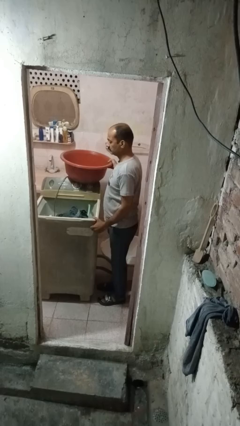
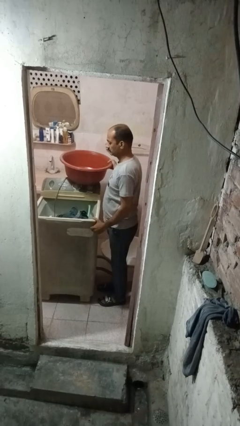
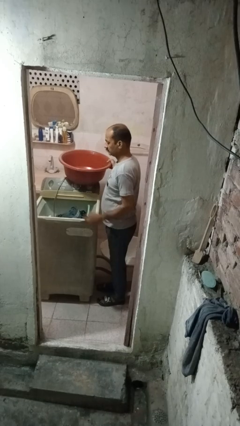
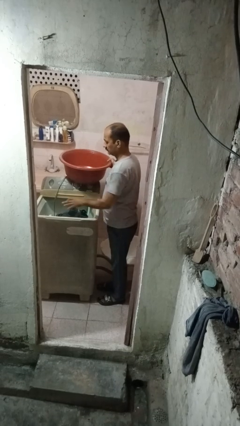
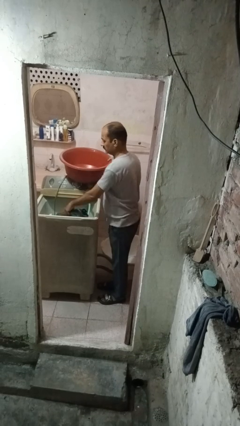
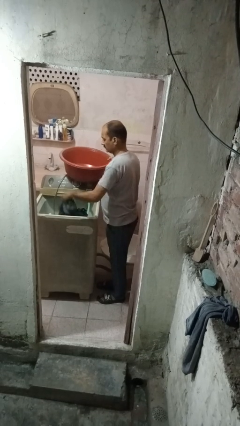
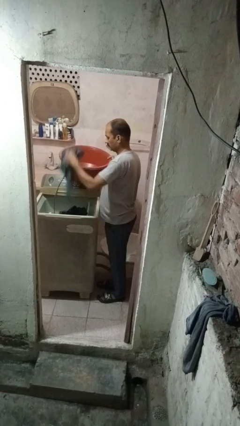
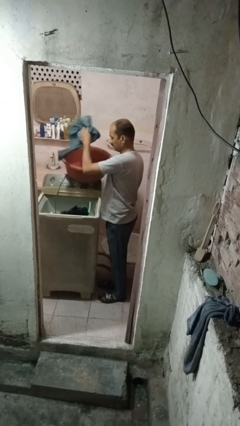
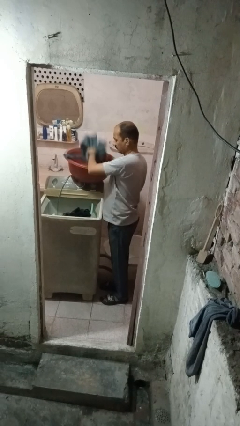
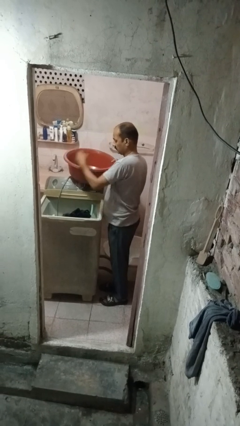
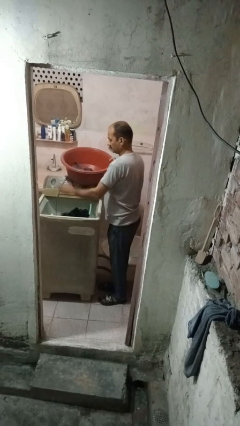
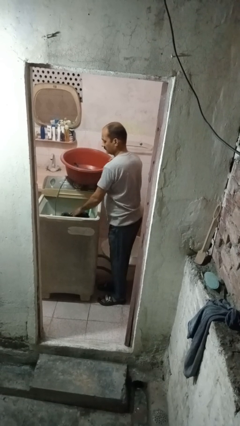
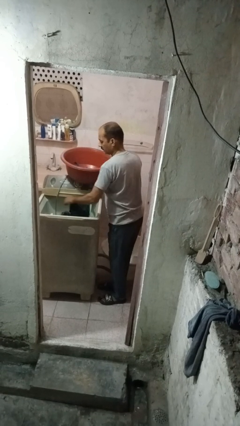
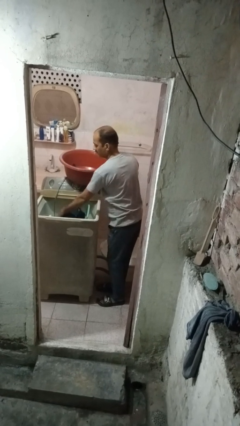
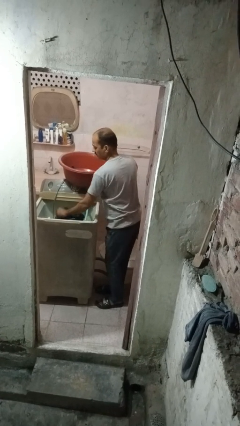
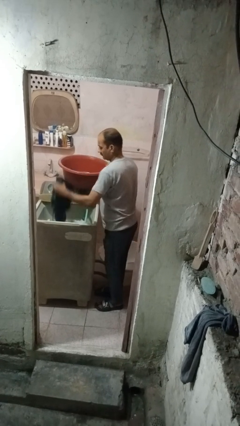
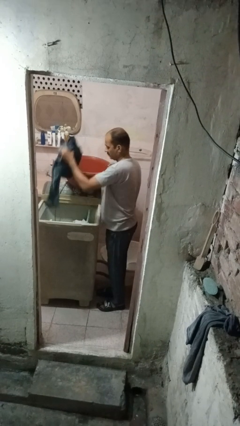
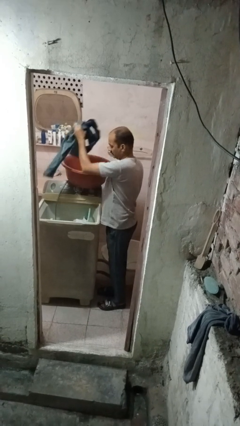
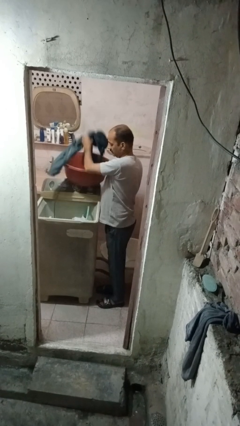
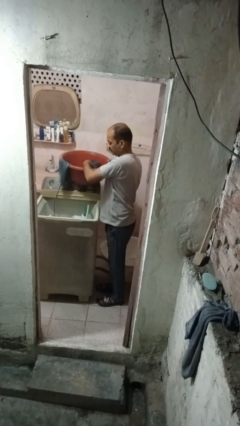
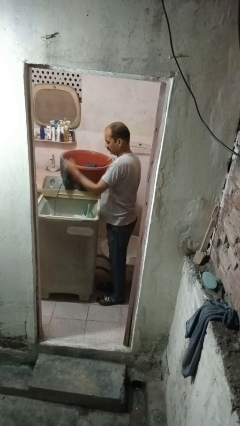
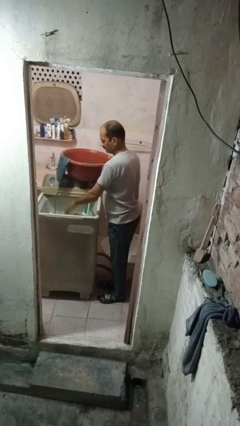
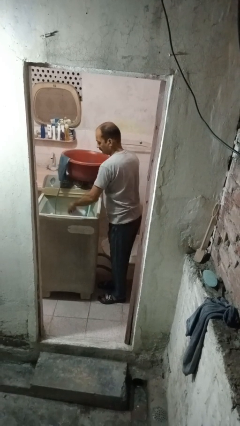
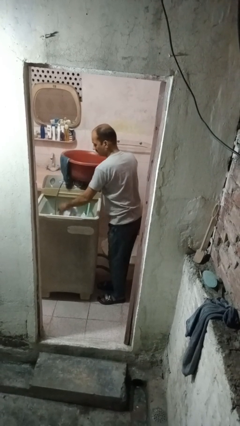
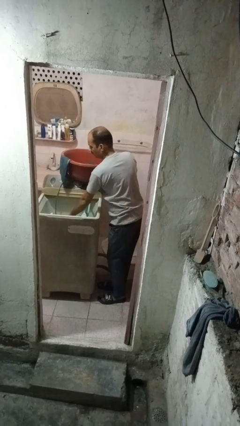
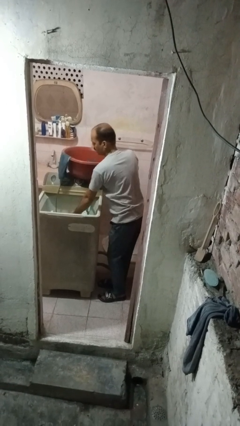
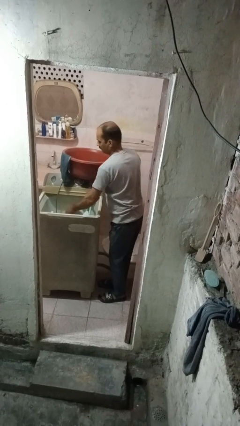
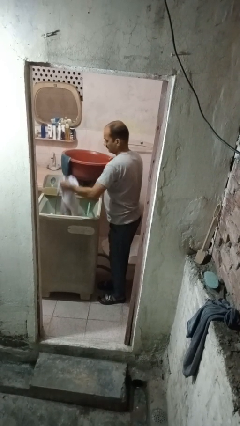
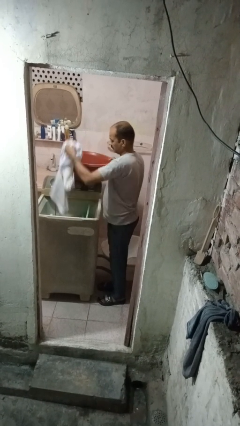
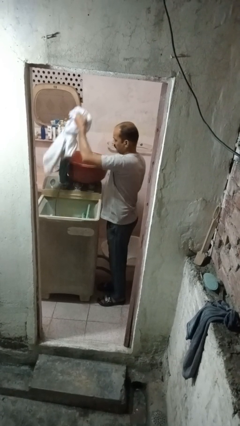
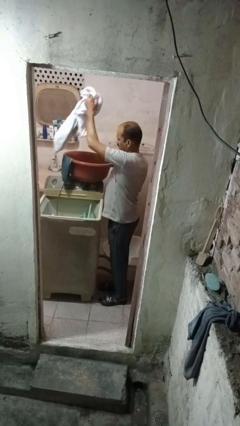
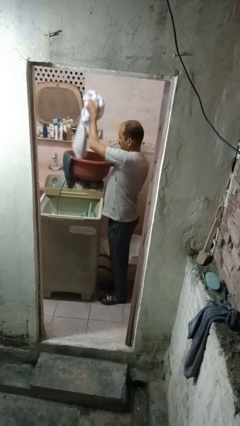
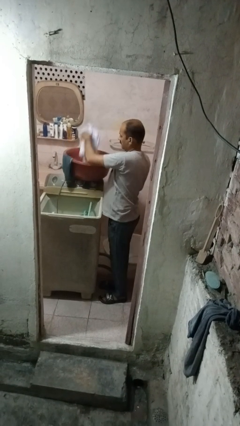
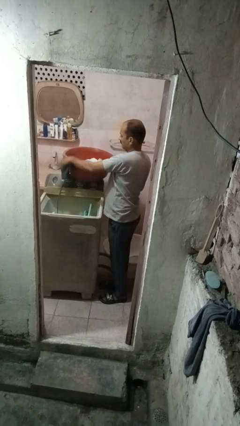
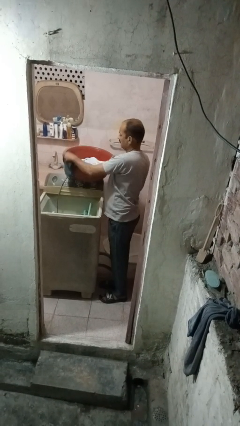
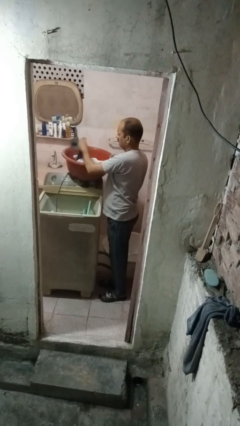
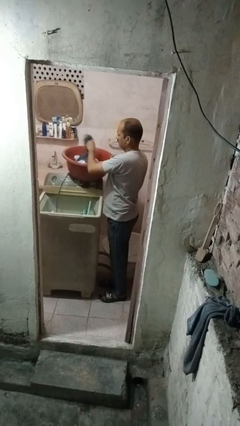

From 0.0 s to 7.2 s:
person unloads dishwasher

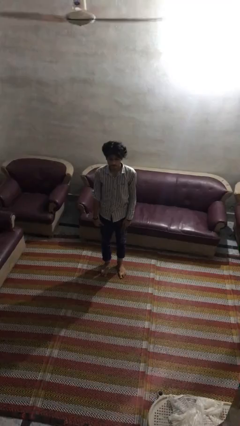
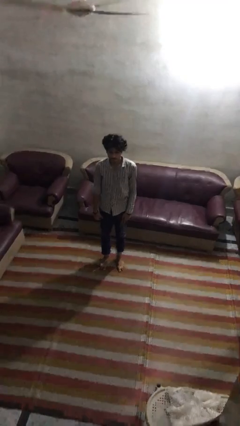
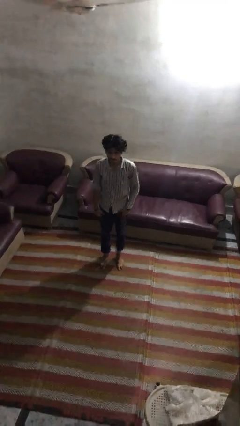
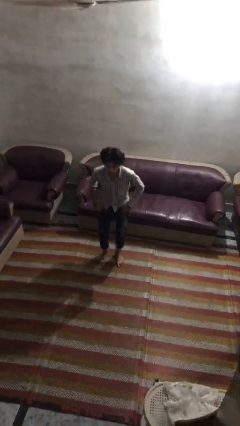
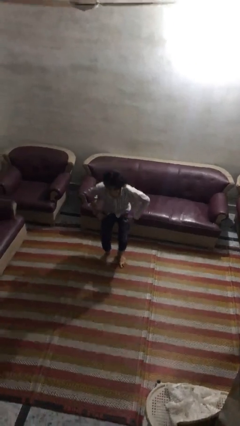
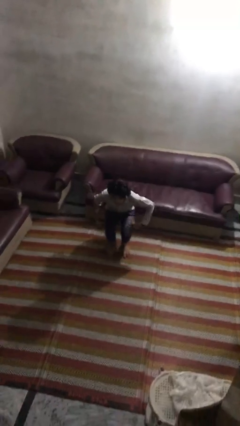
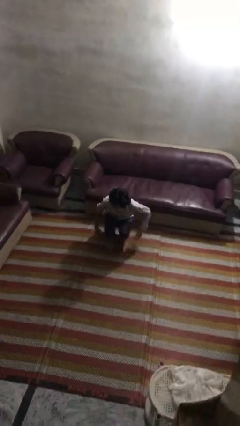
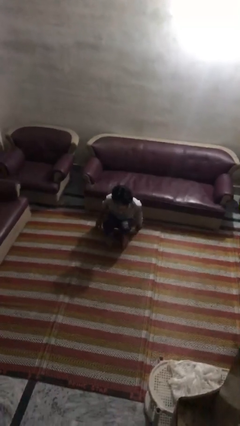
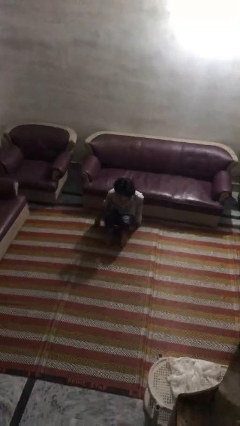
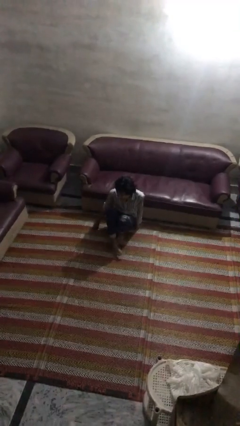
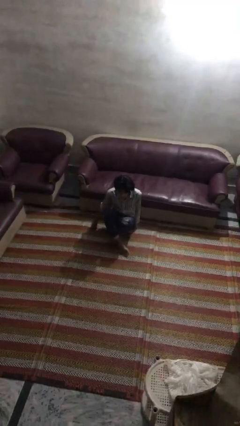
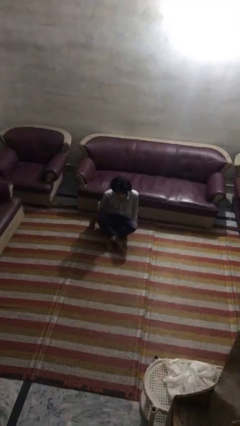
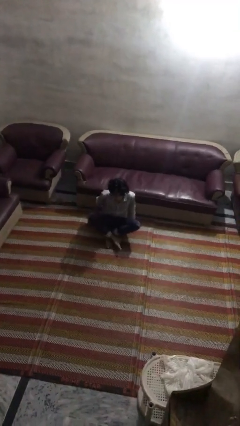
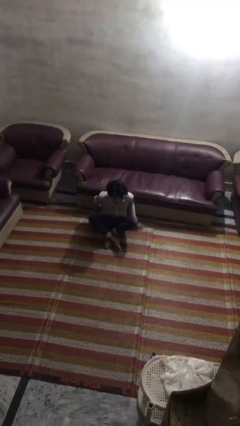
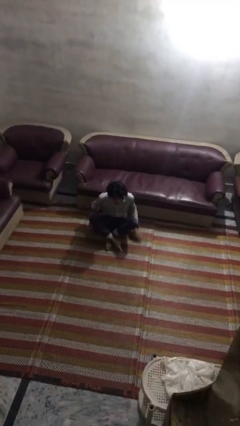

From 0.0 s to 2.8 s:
person sits crisscross

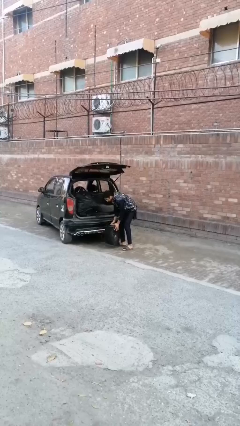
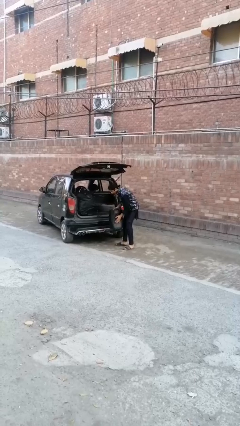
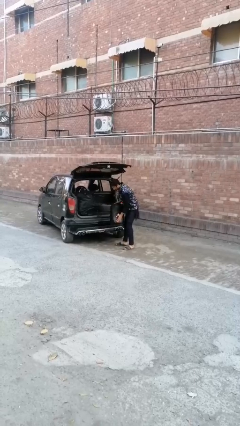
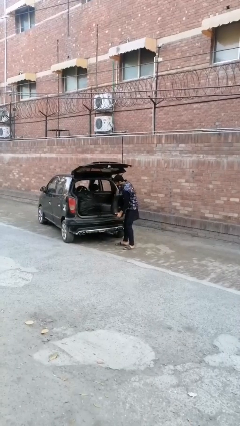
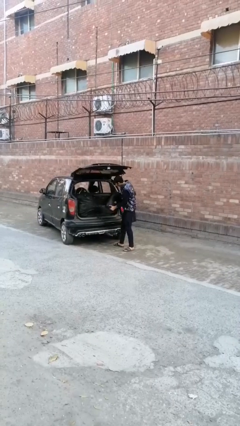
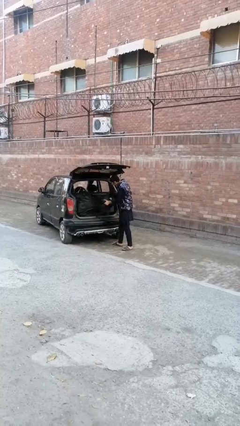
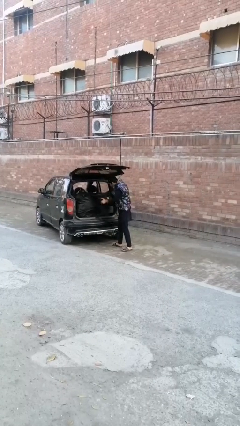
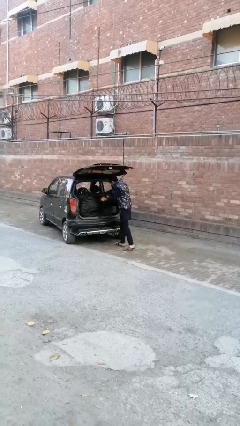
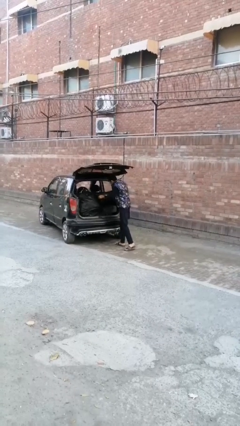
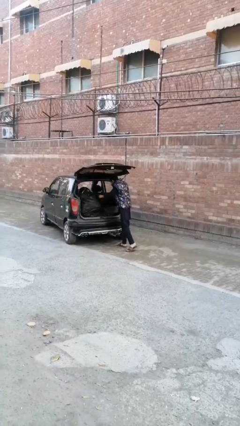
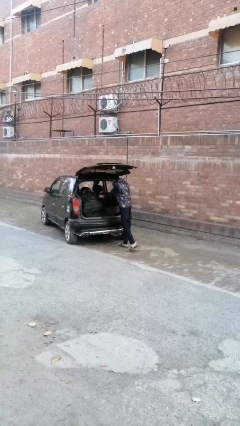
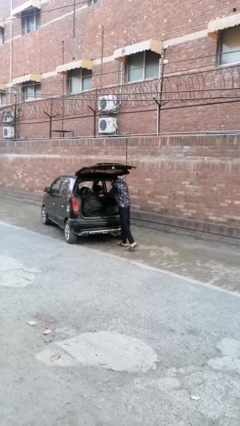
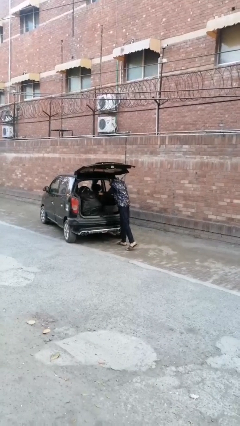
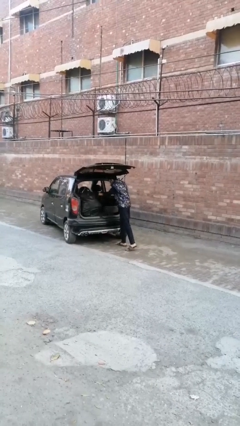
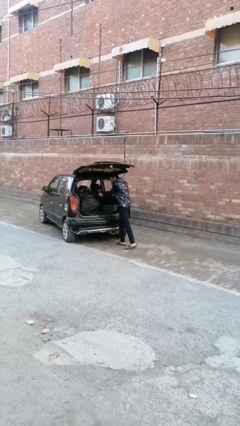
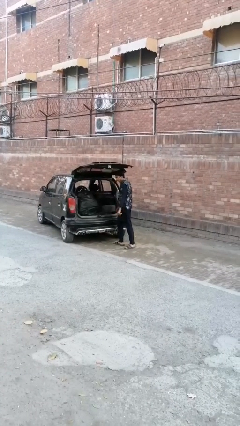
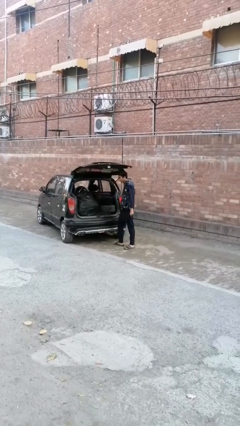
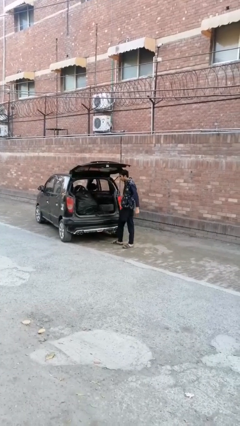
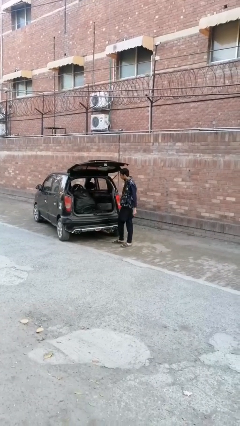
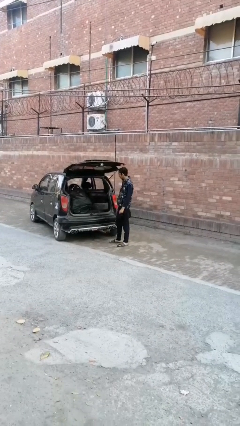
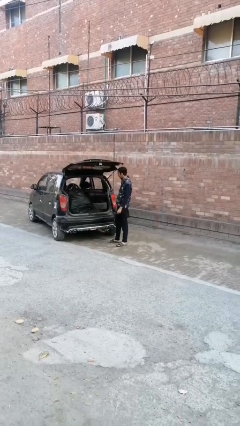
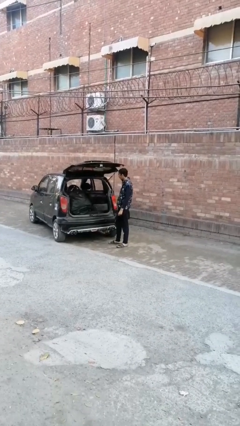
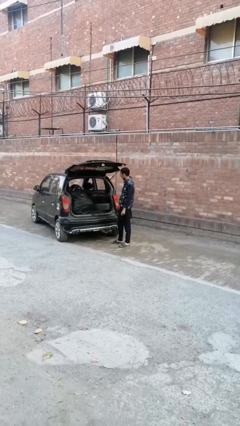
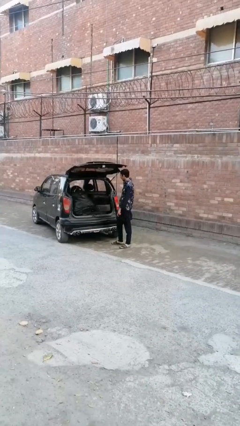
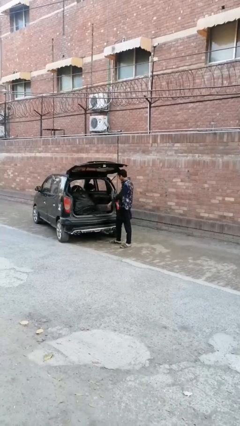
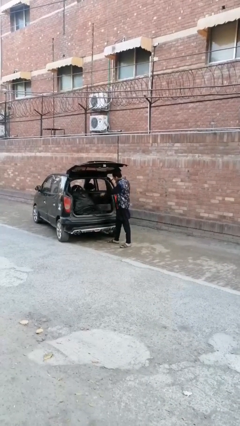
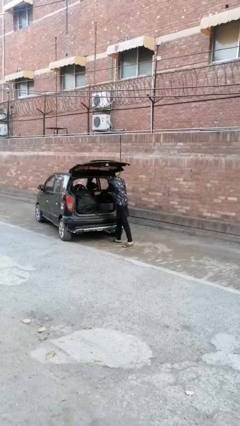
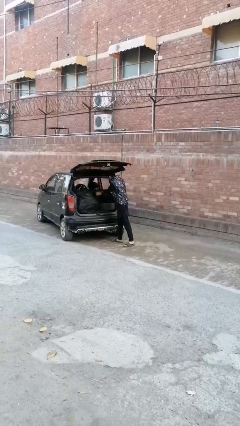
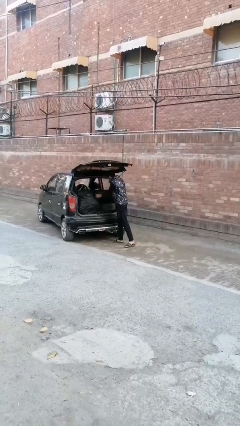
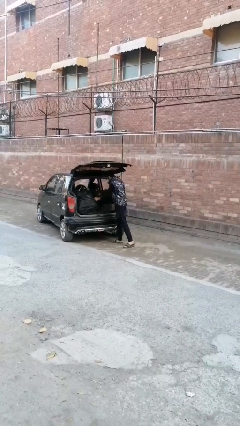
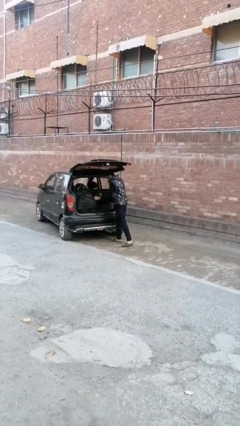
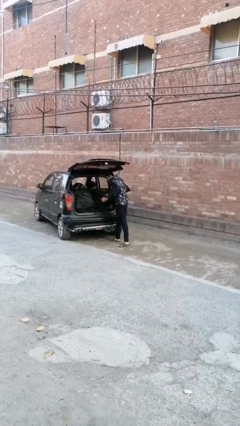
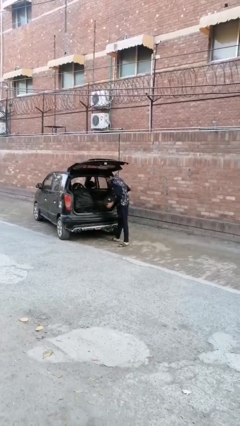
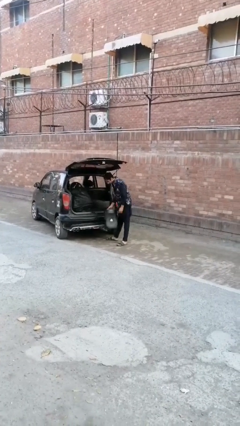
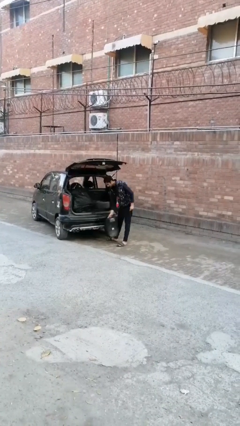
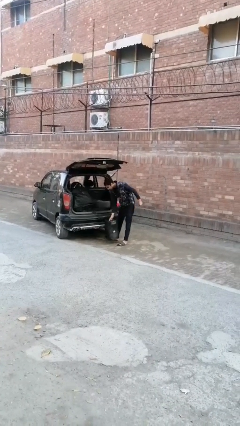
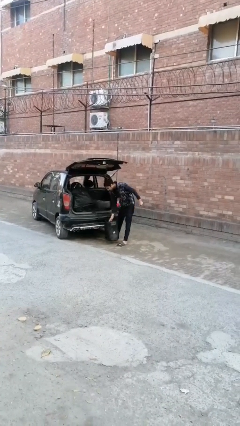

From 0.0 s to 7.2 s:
person loads car

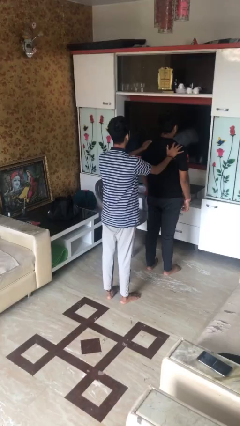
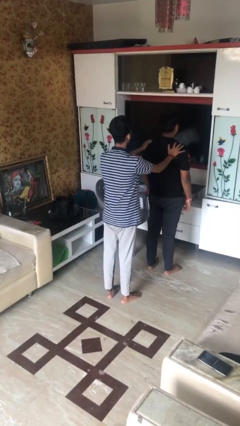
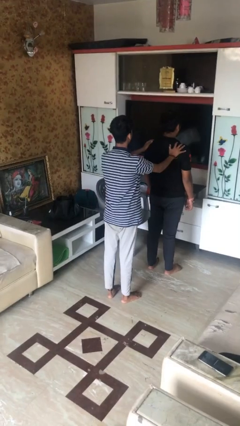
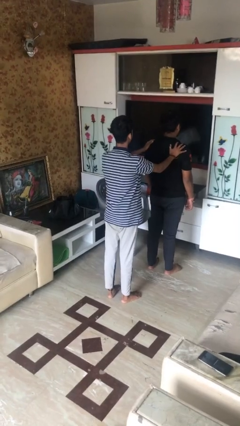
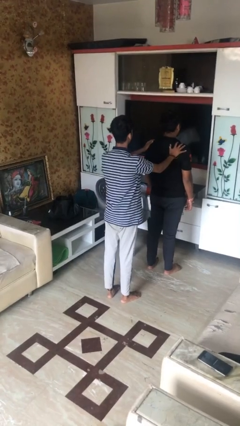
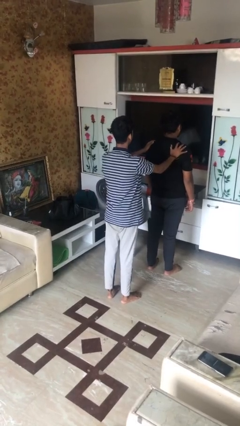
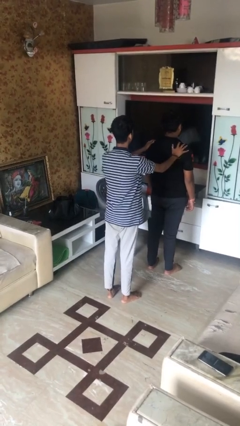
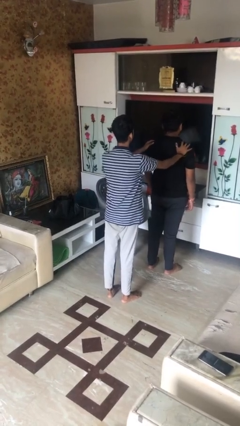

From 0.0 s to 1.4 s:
person grabs person by shoulder
